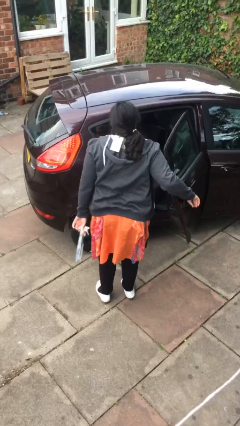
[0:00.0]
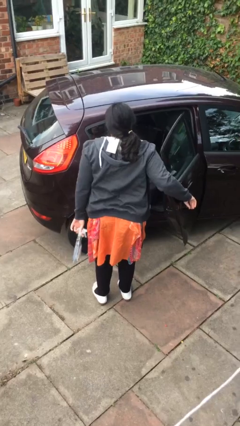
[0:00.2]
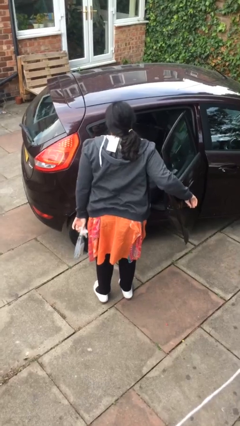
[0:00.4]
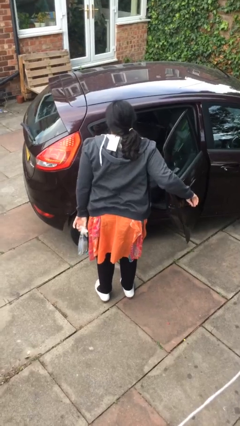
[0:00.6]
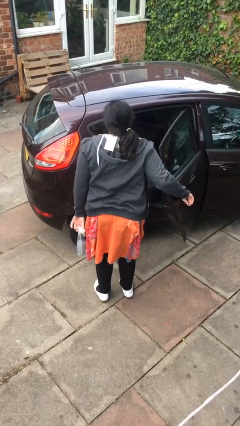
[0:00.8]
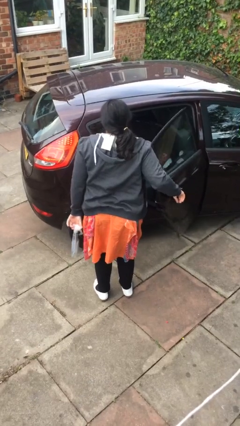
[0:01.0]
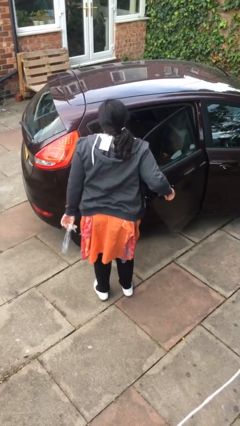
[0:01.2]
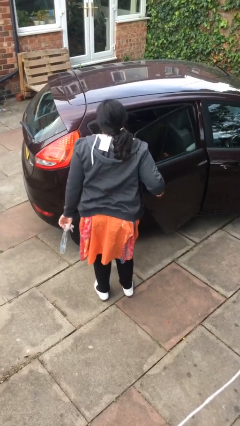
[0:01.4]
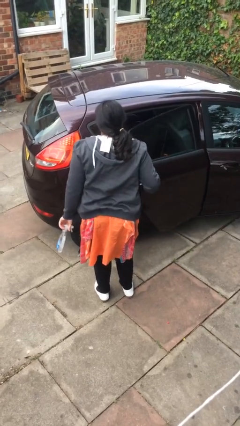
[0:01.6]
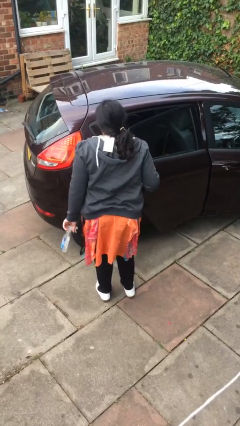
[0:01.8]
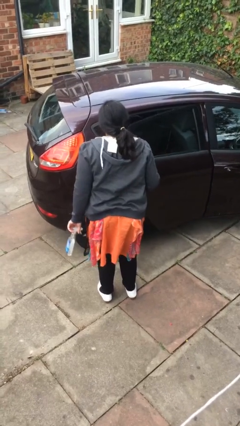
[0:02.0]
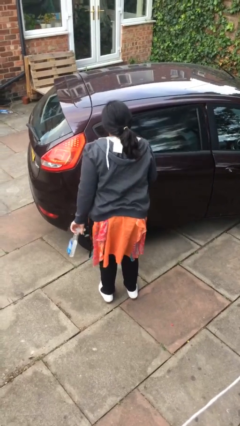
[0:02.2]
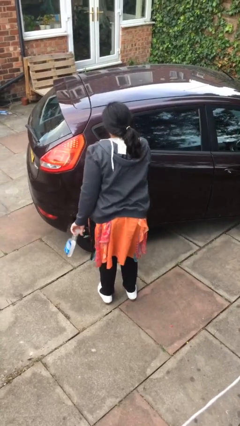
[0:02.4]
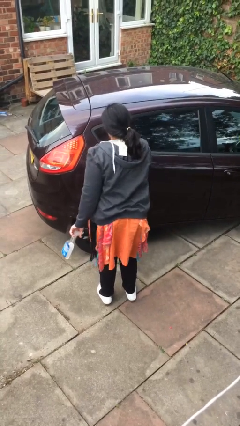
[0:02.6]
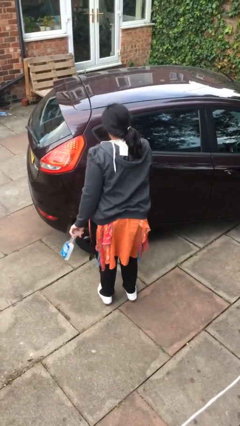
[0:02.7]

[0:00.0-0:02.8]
person closes car door

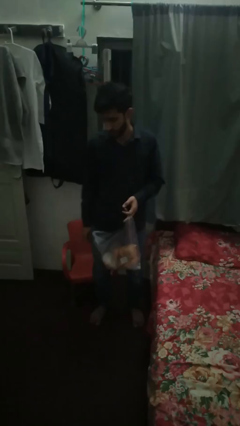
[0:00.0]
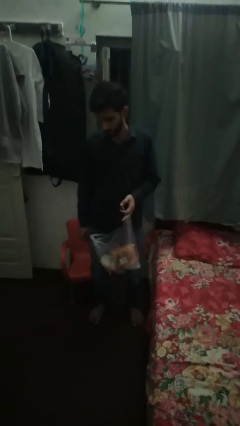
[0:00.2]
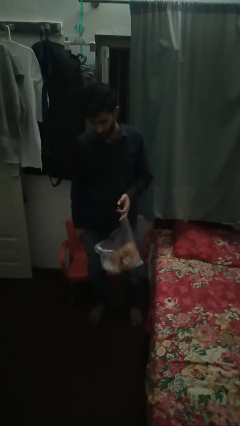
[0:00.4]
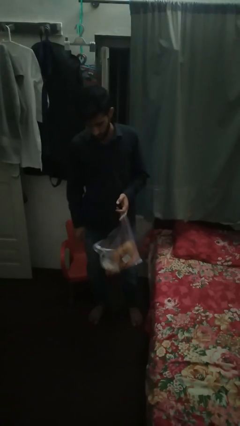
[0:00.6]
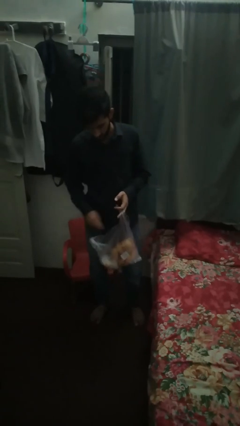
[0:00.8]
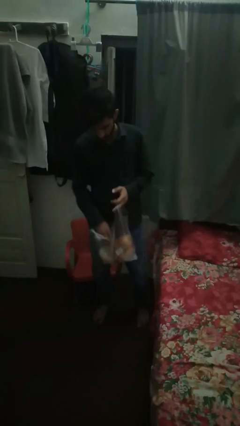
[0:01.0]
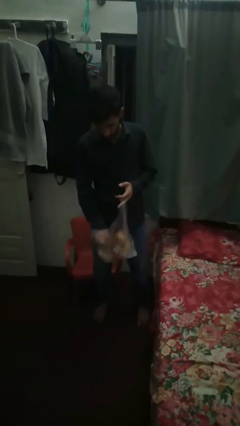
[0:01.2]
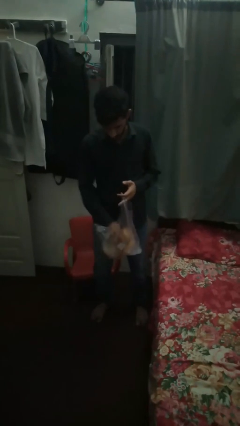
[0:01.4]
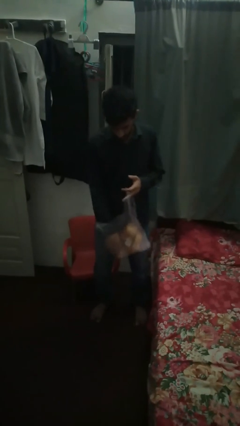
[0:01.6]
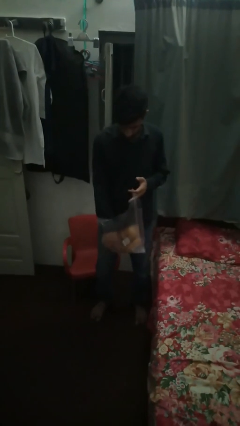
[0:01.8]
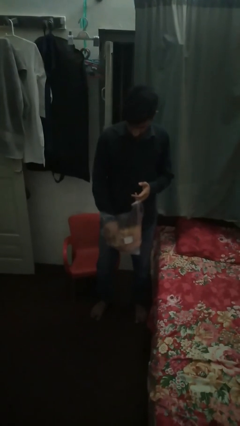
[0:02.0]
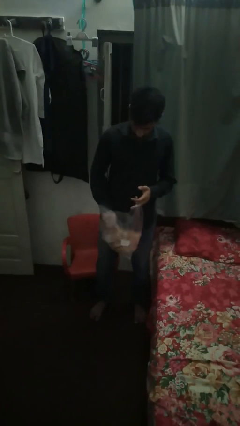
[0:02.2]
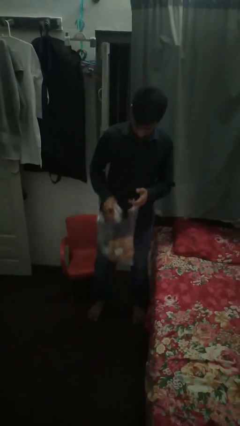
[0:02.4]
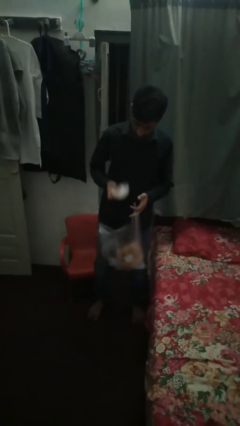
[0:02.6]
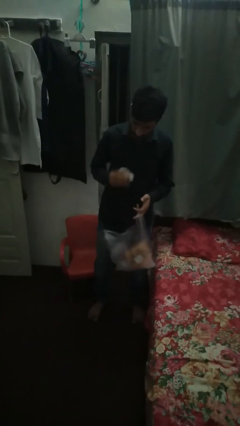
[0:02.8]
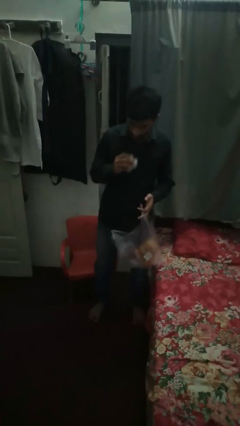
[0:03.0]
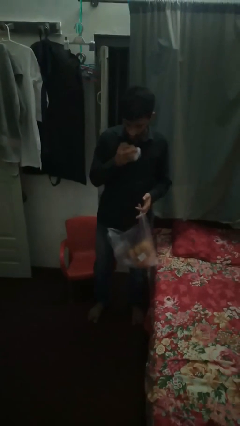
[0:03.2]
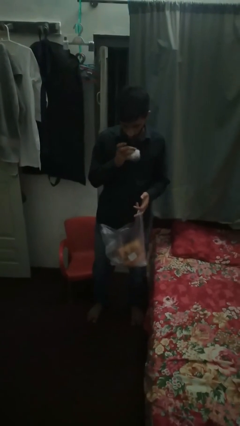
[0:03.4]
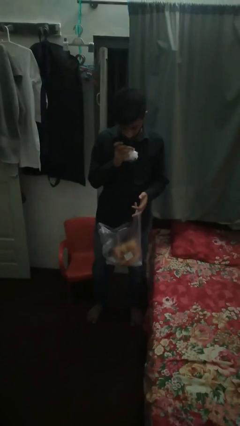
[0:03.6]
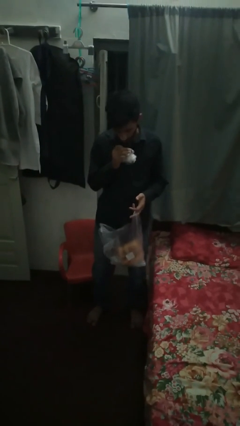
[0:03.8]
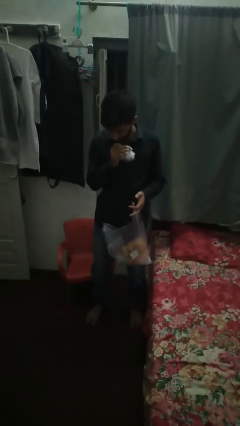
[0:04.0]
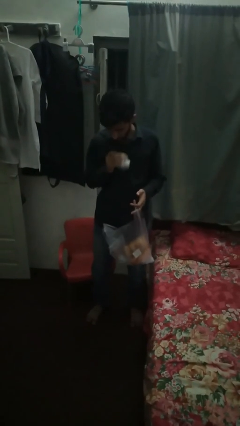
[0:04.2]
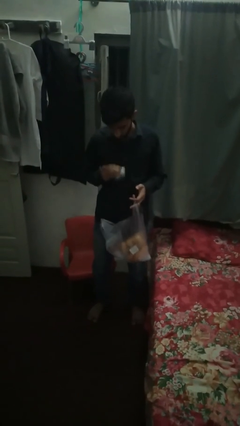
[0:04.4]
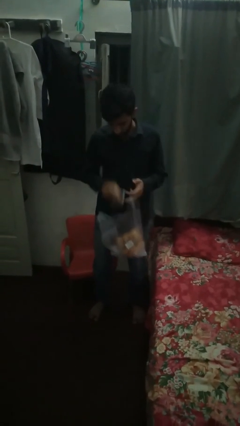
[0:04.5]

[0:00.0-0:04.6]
person eats snack from bag

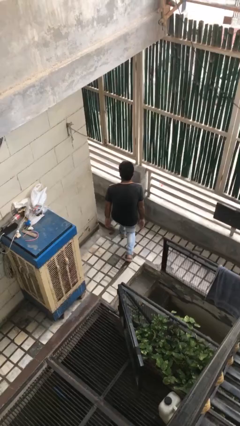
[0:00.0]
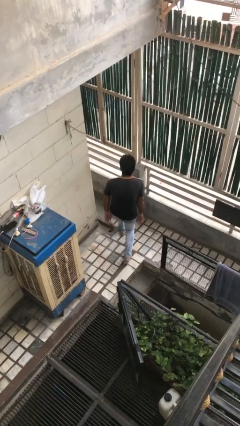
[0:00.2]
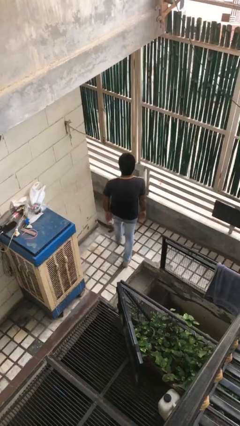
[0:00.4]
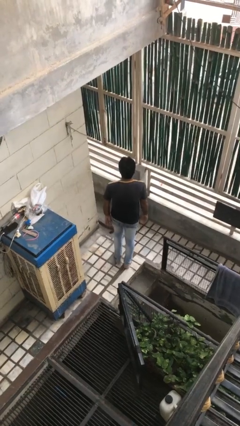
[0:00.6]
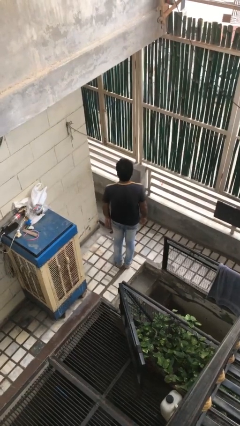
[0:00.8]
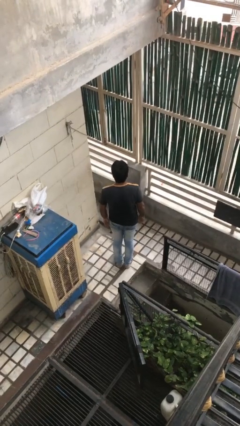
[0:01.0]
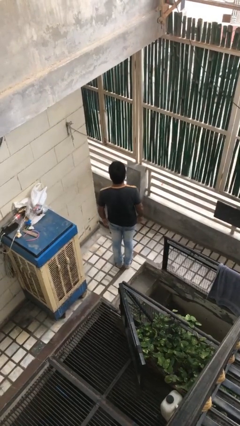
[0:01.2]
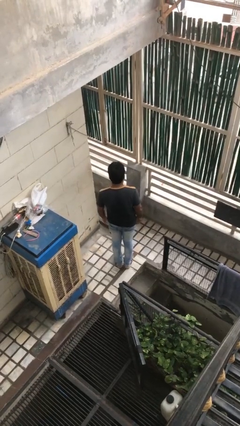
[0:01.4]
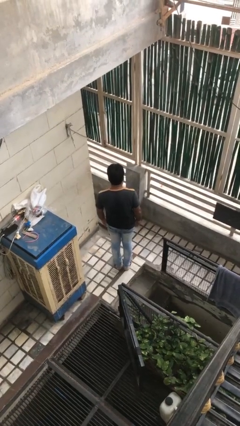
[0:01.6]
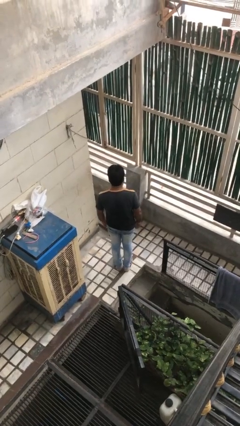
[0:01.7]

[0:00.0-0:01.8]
person stands up from floor

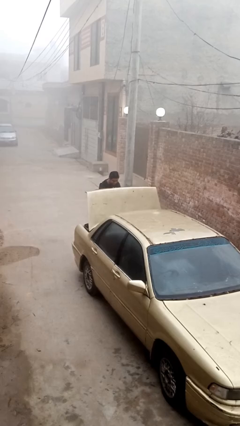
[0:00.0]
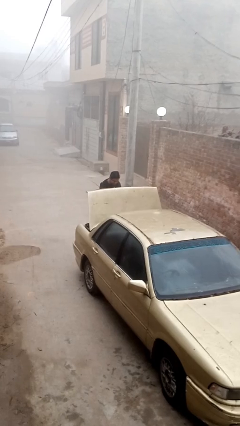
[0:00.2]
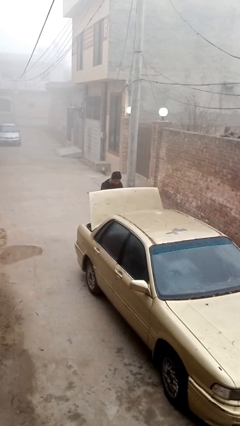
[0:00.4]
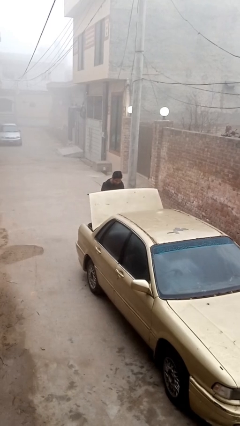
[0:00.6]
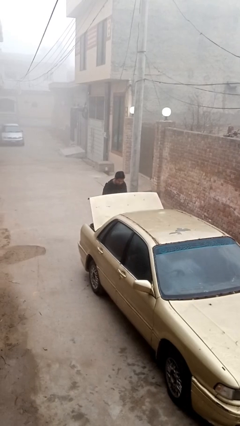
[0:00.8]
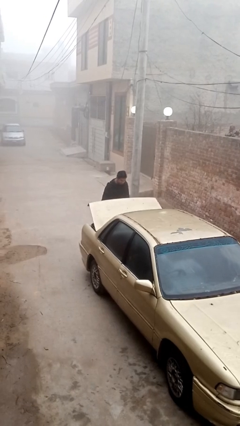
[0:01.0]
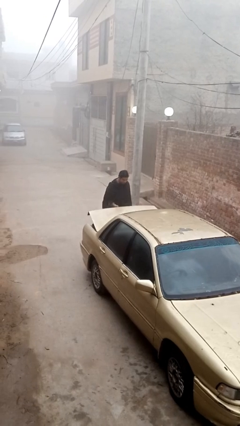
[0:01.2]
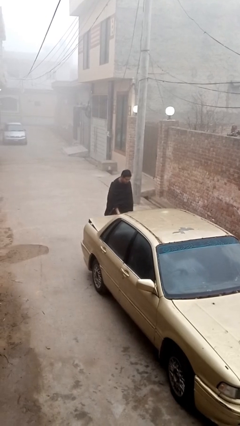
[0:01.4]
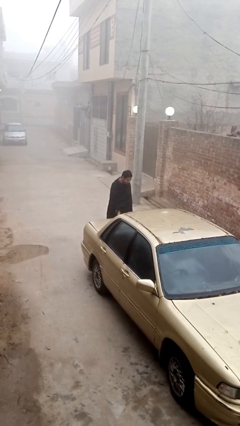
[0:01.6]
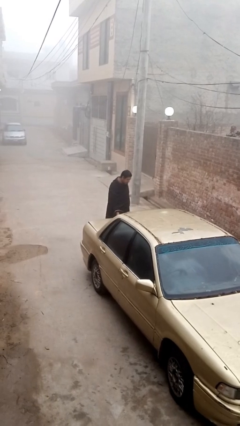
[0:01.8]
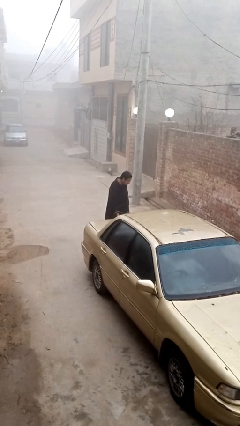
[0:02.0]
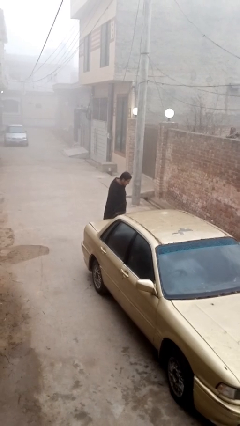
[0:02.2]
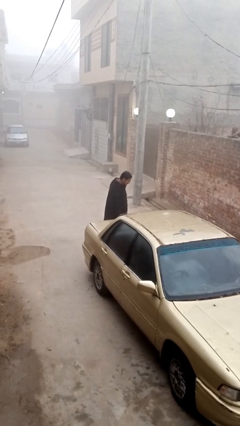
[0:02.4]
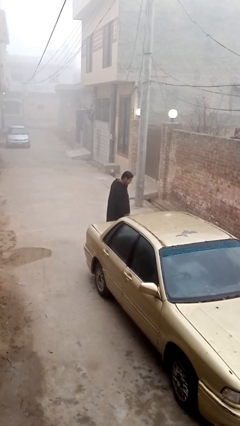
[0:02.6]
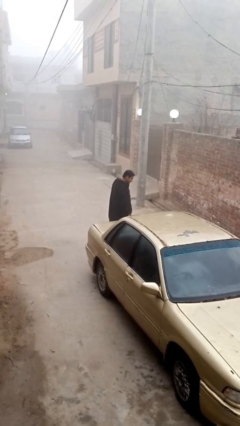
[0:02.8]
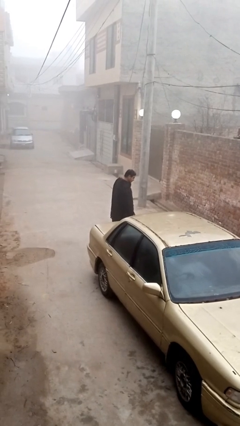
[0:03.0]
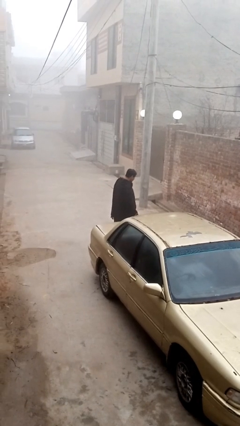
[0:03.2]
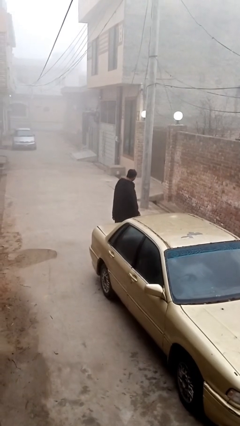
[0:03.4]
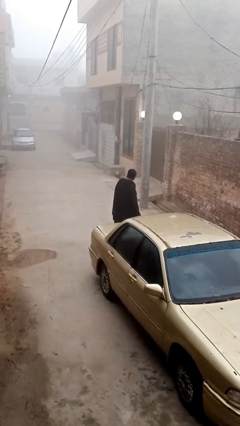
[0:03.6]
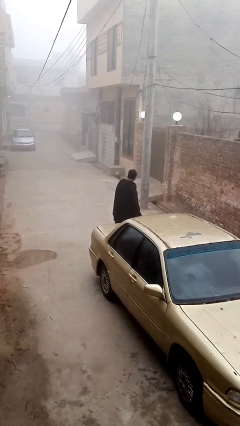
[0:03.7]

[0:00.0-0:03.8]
person closes car trunk

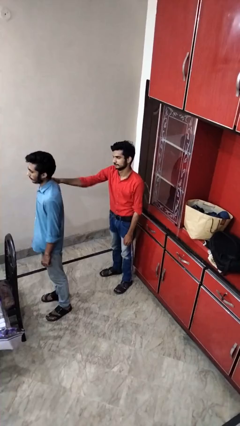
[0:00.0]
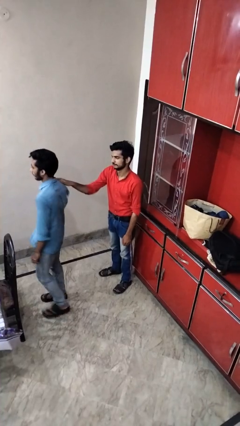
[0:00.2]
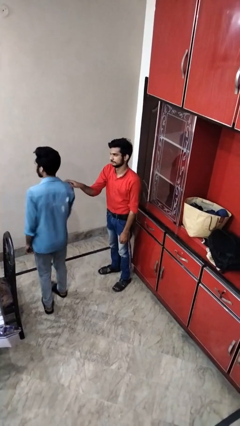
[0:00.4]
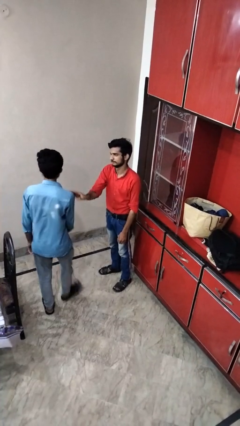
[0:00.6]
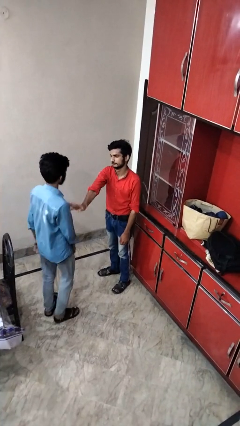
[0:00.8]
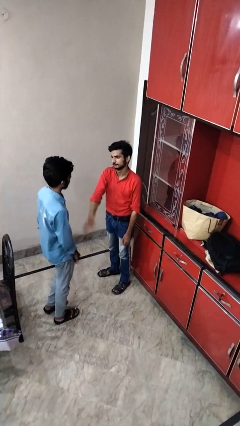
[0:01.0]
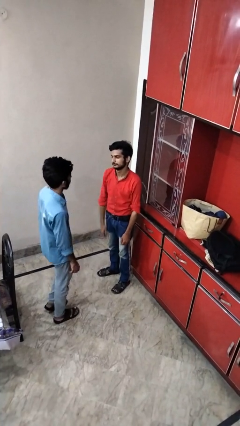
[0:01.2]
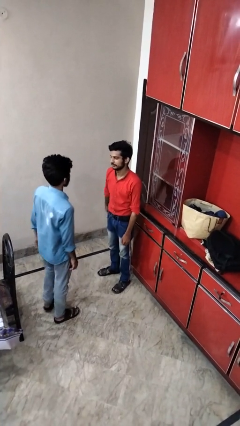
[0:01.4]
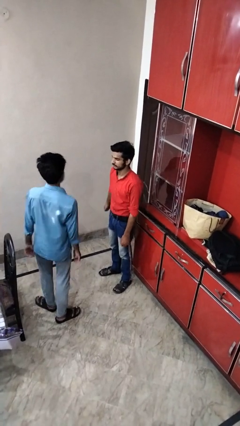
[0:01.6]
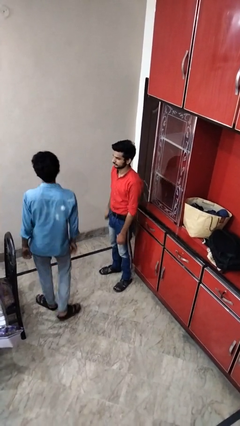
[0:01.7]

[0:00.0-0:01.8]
person spins person around

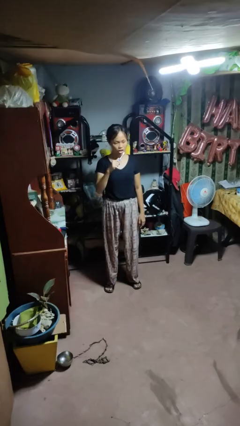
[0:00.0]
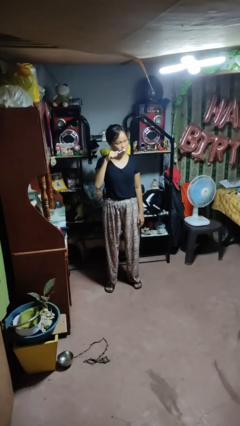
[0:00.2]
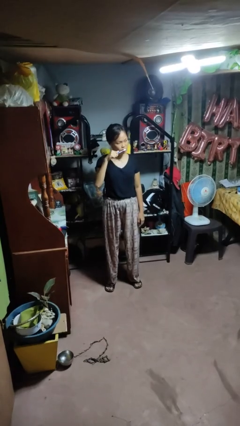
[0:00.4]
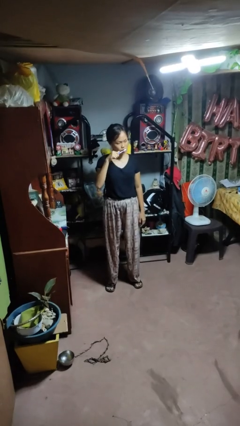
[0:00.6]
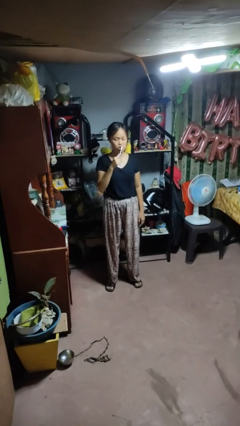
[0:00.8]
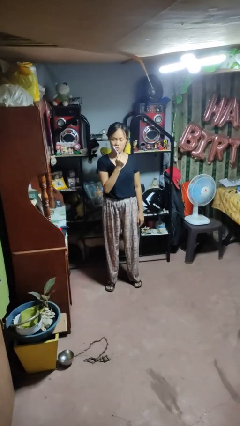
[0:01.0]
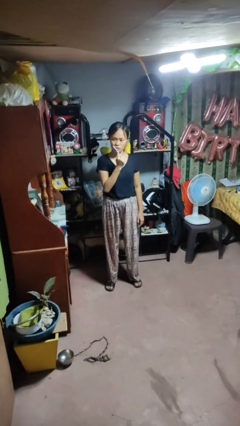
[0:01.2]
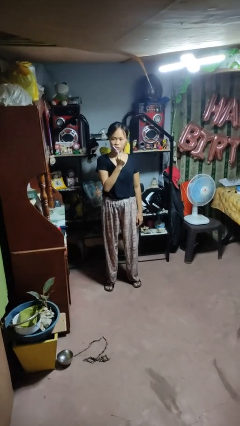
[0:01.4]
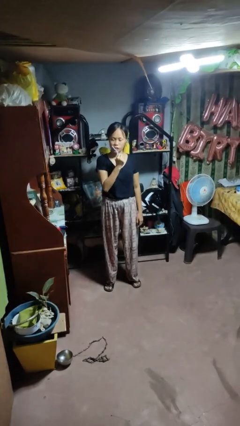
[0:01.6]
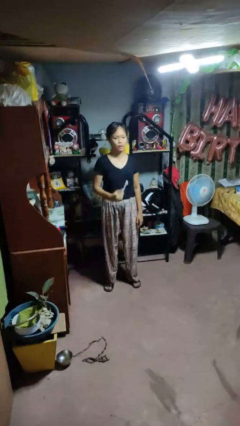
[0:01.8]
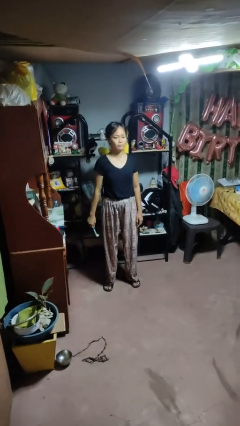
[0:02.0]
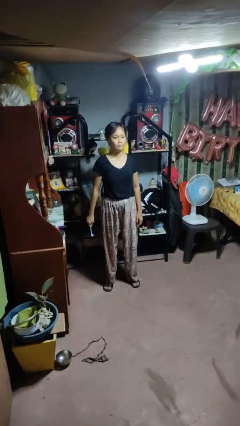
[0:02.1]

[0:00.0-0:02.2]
person brushes teeth

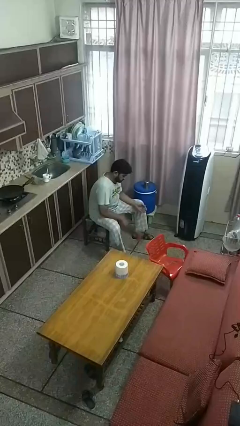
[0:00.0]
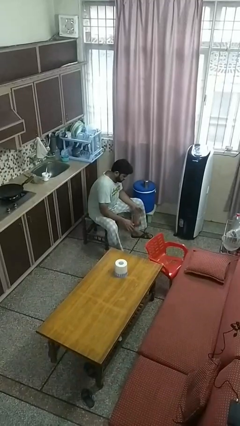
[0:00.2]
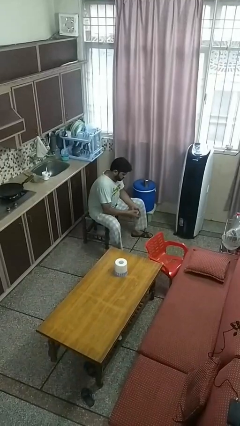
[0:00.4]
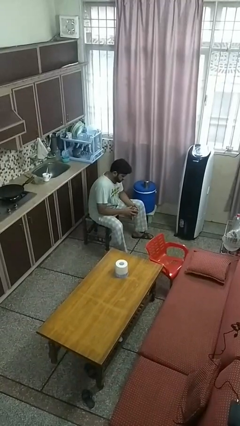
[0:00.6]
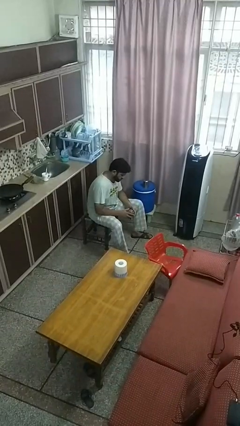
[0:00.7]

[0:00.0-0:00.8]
person bounces ball on floor
